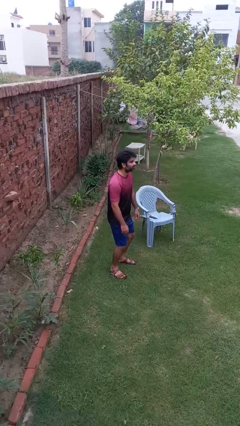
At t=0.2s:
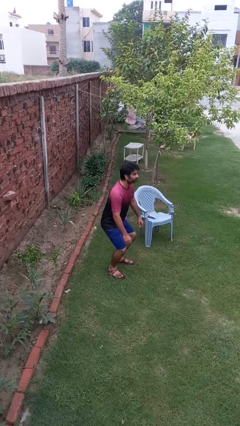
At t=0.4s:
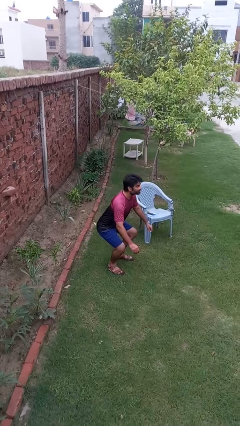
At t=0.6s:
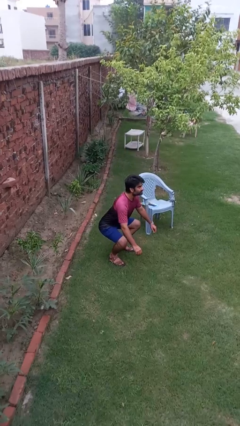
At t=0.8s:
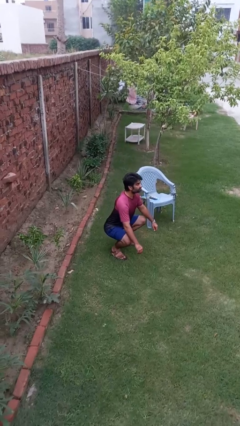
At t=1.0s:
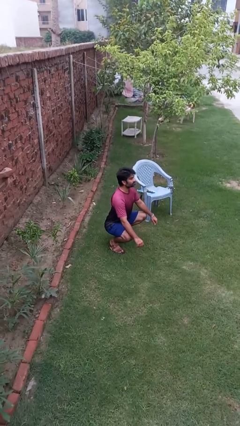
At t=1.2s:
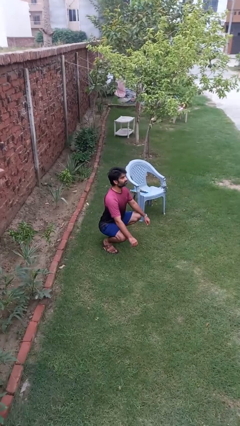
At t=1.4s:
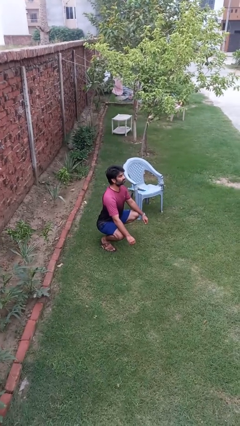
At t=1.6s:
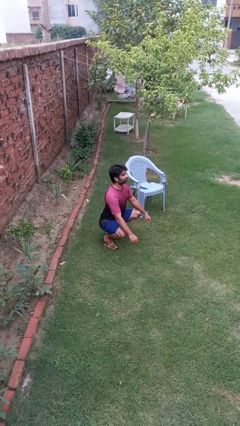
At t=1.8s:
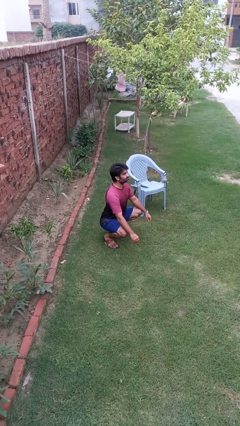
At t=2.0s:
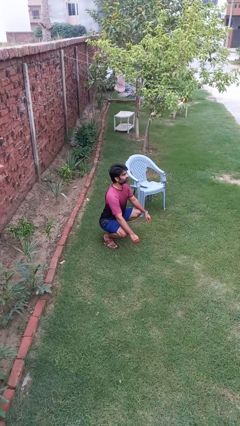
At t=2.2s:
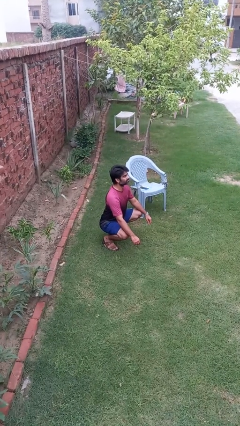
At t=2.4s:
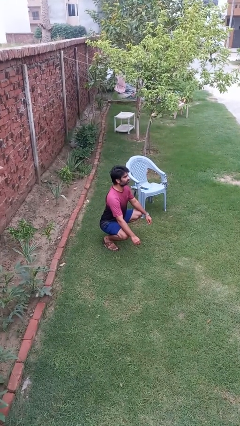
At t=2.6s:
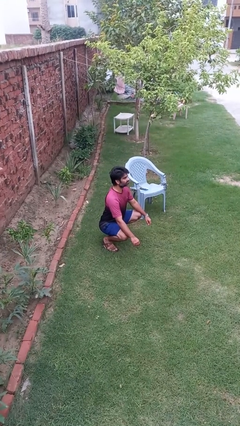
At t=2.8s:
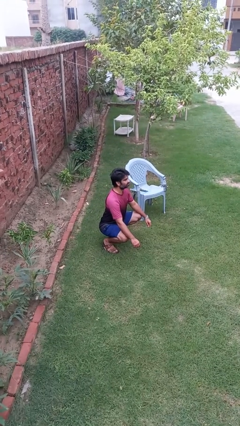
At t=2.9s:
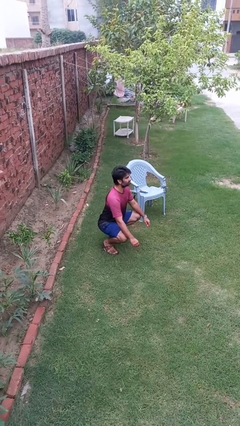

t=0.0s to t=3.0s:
person squats

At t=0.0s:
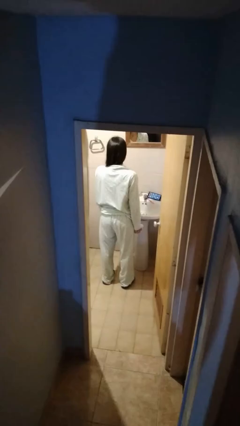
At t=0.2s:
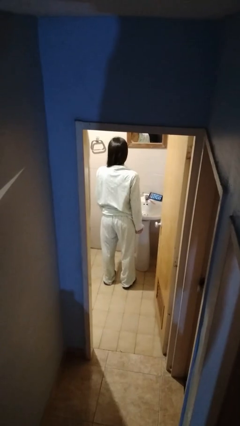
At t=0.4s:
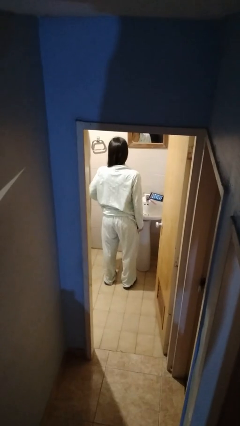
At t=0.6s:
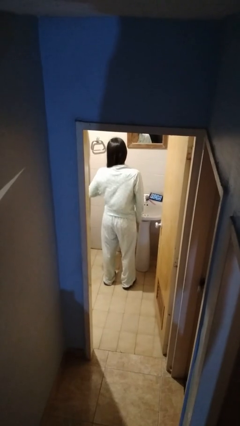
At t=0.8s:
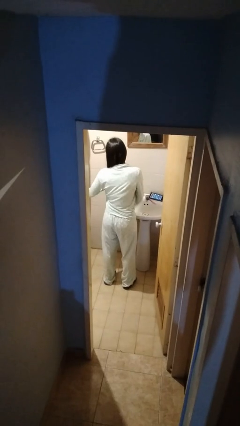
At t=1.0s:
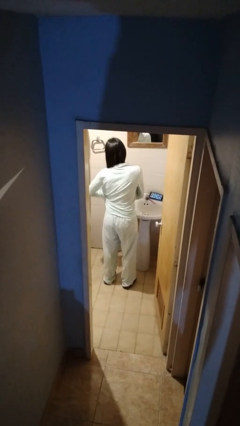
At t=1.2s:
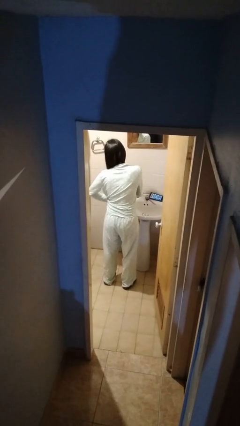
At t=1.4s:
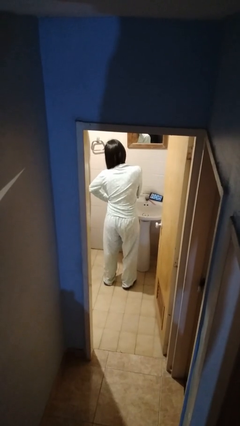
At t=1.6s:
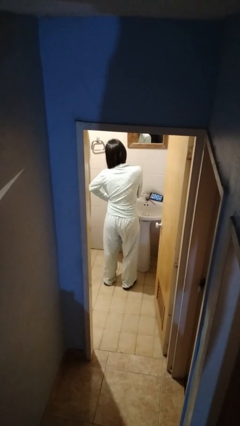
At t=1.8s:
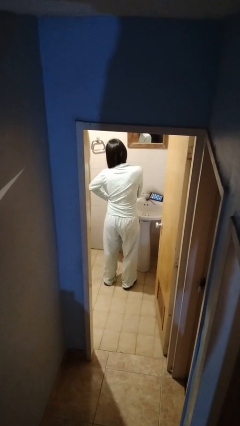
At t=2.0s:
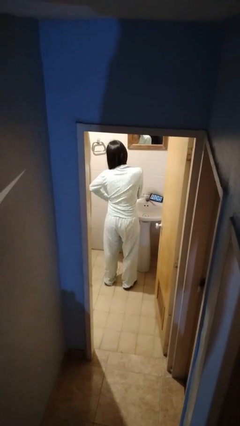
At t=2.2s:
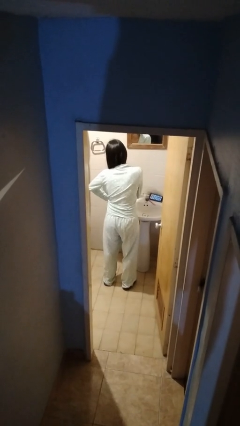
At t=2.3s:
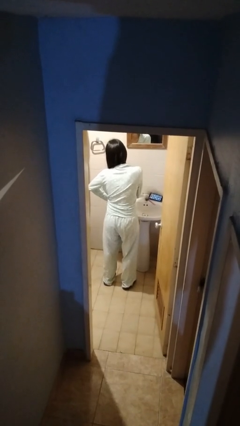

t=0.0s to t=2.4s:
person applies deodorant

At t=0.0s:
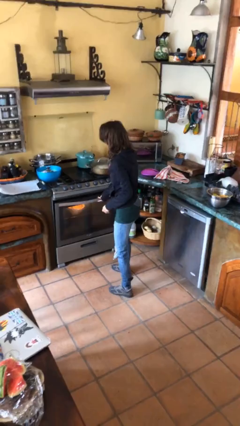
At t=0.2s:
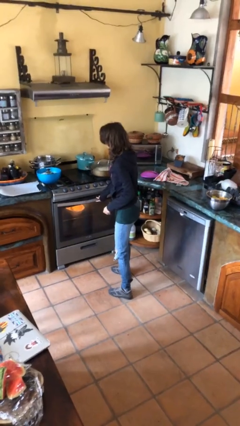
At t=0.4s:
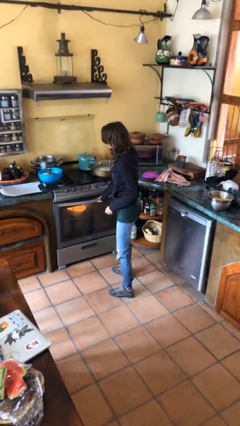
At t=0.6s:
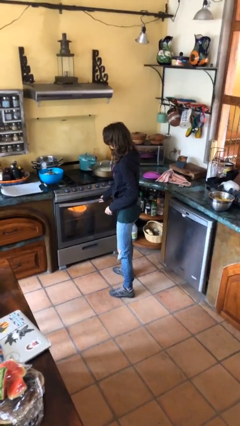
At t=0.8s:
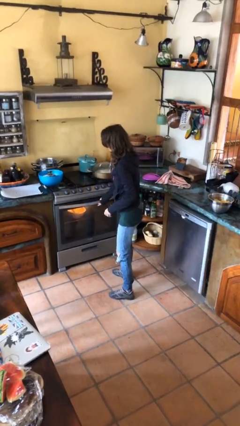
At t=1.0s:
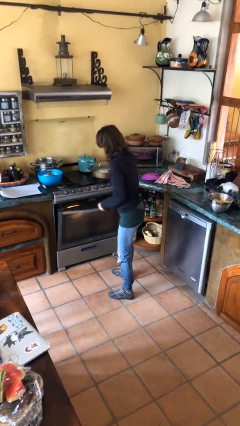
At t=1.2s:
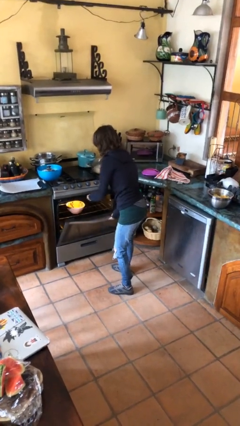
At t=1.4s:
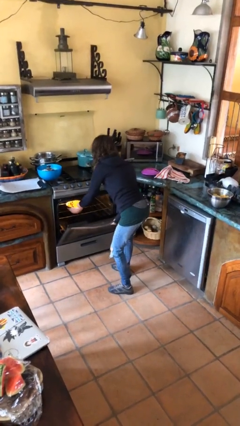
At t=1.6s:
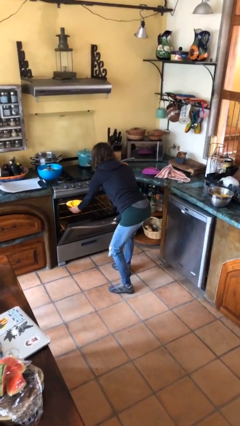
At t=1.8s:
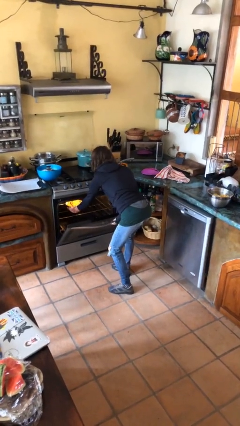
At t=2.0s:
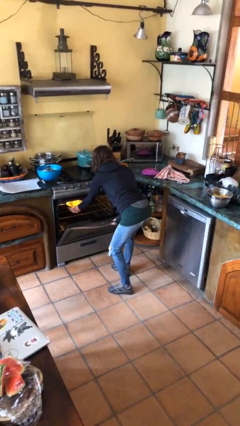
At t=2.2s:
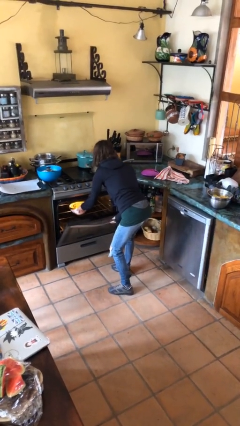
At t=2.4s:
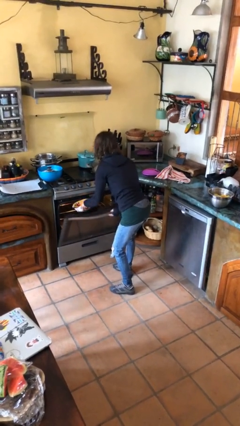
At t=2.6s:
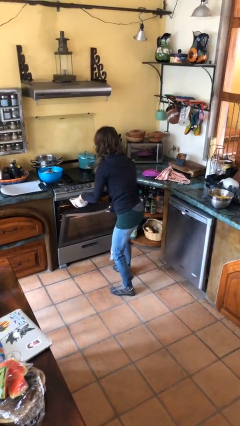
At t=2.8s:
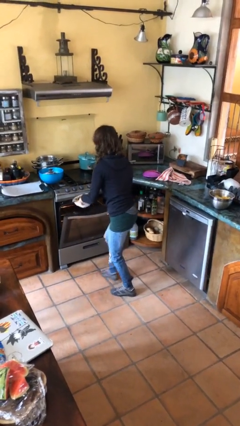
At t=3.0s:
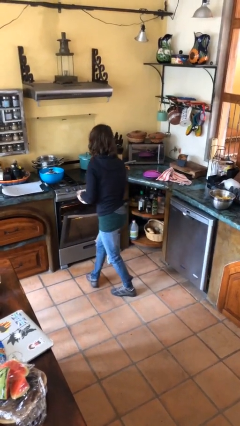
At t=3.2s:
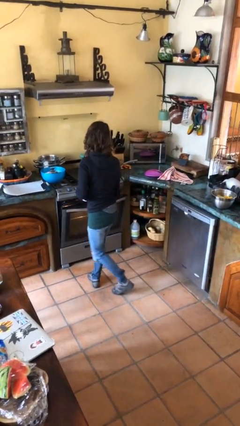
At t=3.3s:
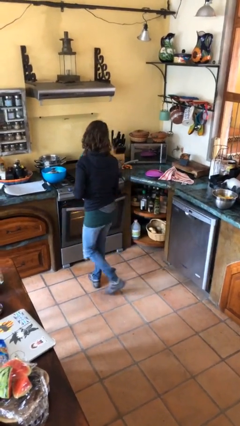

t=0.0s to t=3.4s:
person takes object from oven

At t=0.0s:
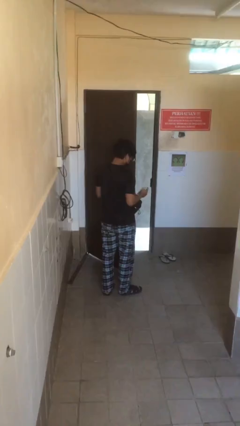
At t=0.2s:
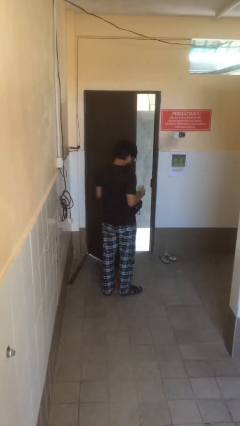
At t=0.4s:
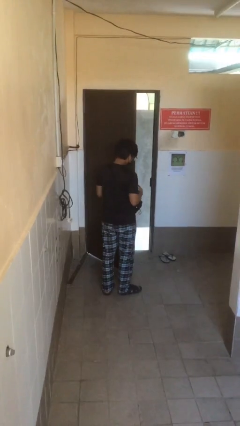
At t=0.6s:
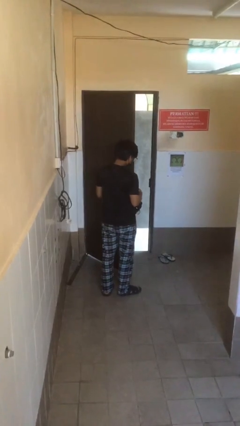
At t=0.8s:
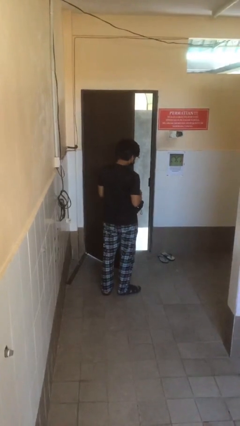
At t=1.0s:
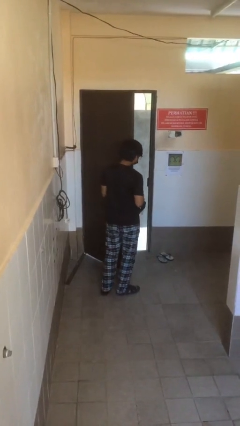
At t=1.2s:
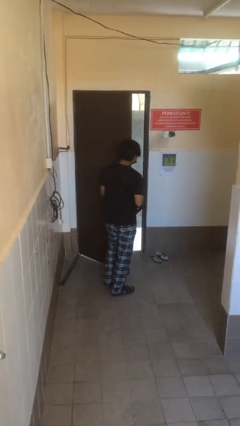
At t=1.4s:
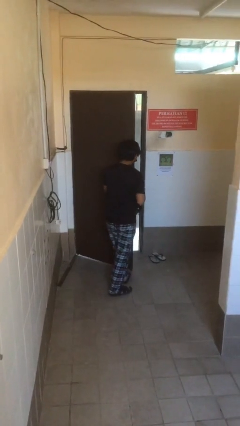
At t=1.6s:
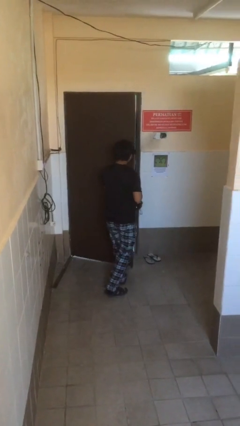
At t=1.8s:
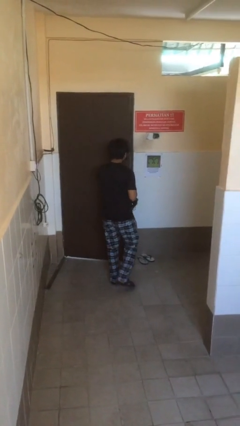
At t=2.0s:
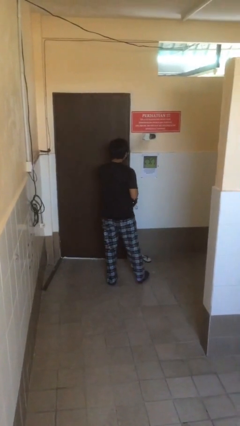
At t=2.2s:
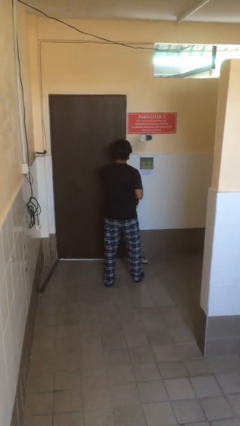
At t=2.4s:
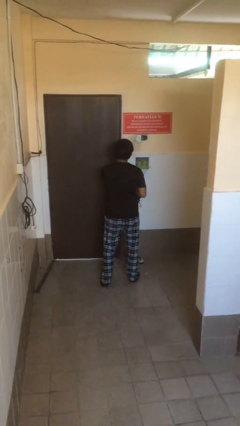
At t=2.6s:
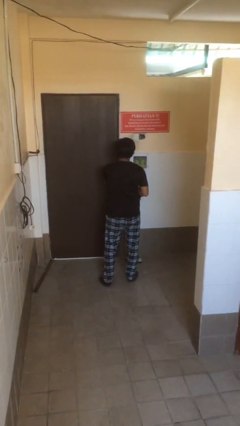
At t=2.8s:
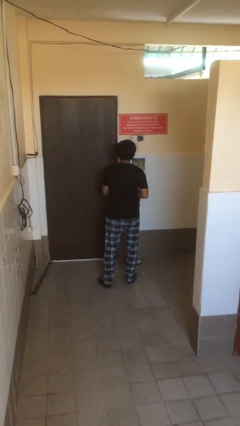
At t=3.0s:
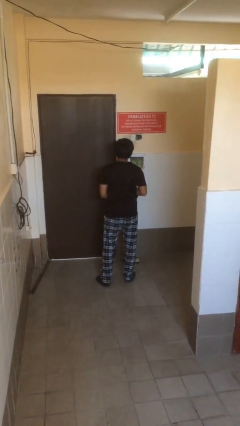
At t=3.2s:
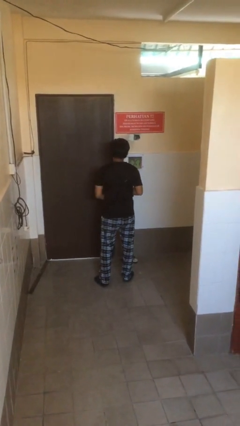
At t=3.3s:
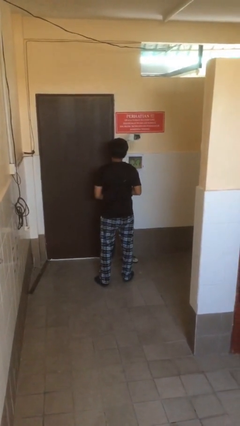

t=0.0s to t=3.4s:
person closes facility door

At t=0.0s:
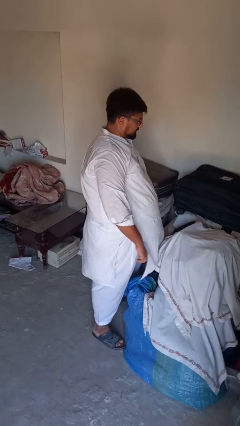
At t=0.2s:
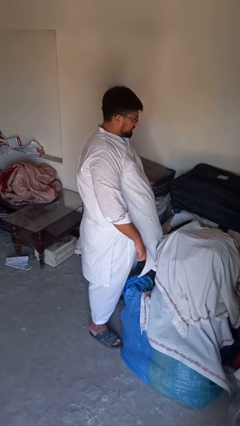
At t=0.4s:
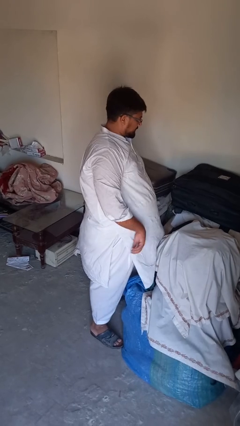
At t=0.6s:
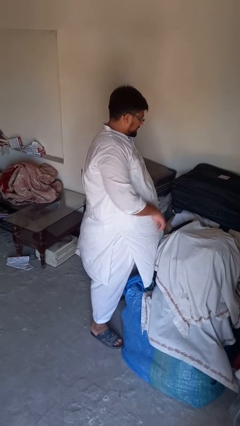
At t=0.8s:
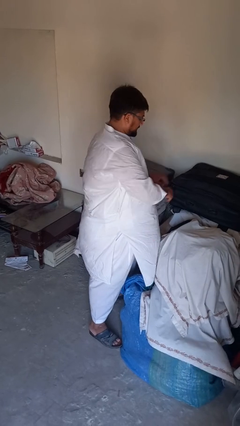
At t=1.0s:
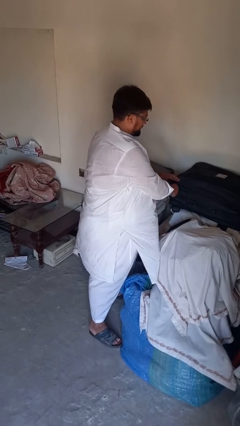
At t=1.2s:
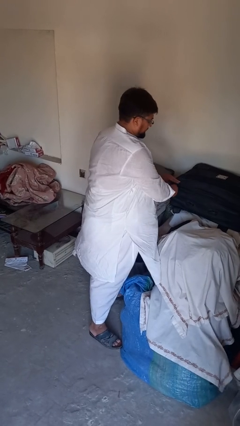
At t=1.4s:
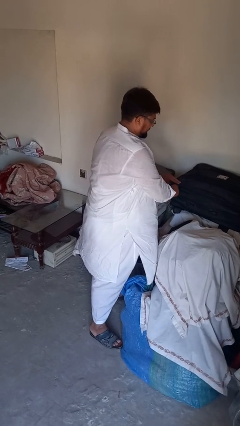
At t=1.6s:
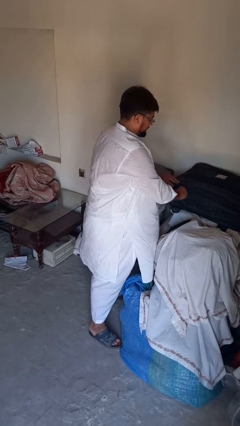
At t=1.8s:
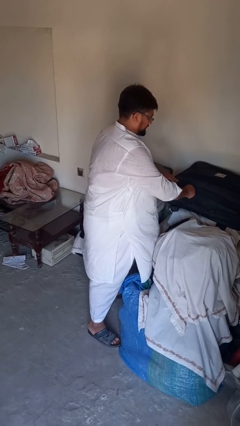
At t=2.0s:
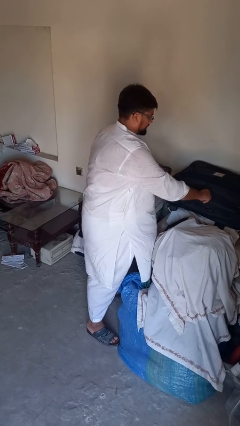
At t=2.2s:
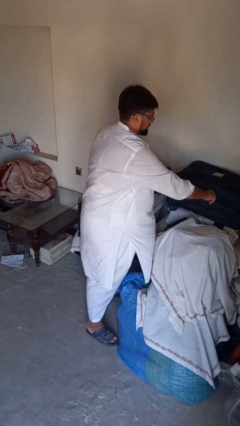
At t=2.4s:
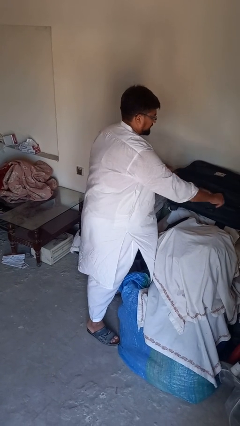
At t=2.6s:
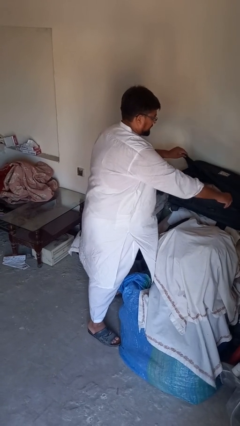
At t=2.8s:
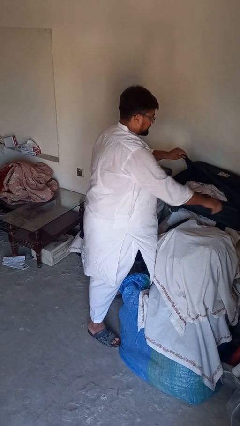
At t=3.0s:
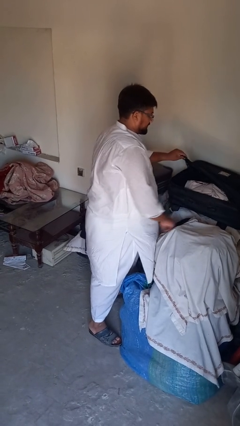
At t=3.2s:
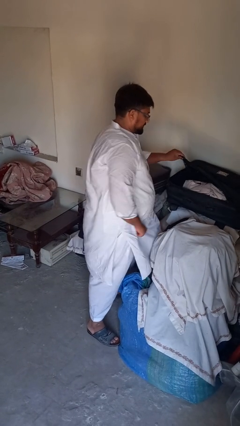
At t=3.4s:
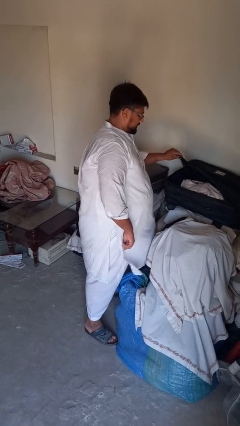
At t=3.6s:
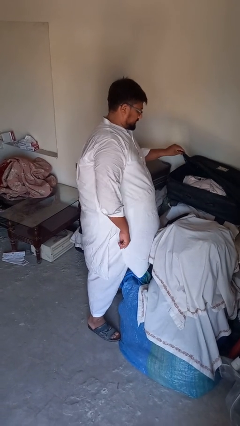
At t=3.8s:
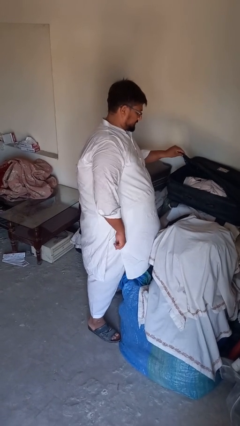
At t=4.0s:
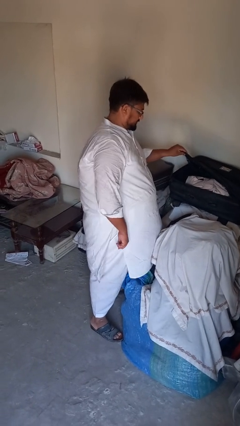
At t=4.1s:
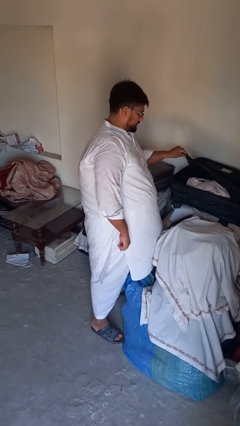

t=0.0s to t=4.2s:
person opens suitcase

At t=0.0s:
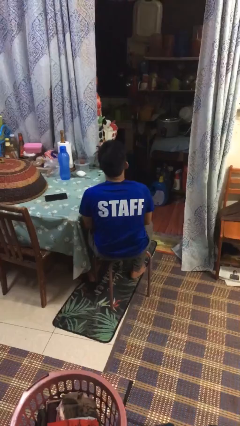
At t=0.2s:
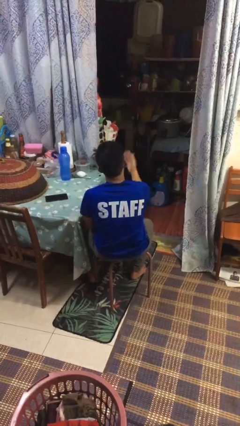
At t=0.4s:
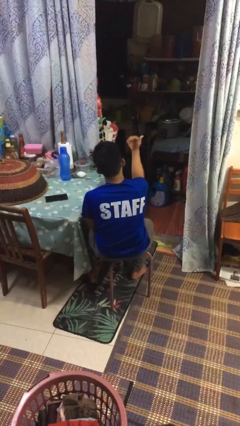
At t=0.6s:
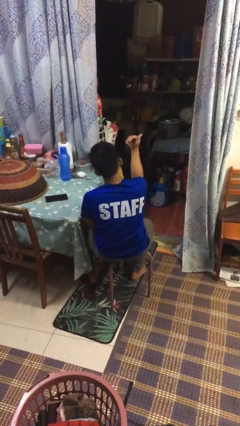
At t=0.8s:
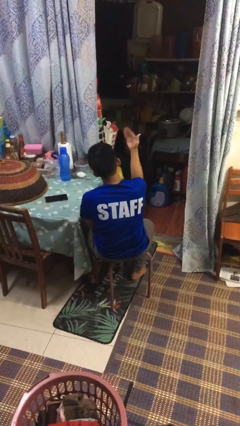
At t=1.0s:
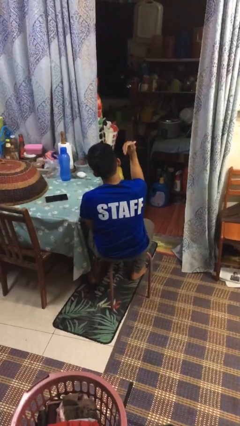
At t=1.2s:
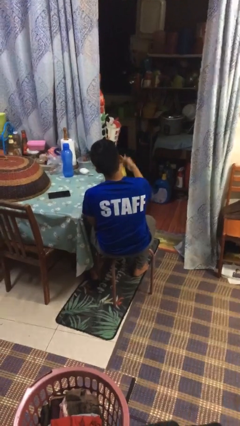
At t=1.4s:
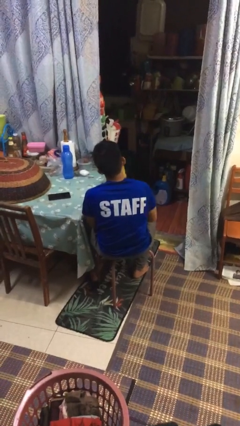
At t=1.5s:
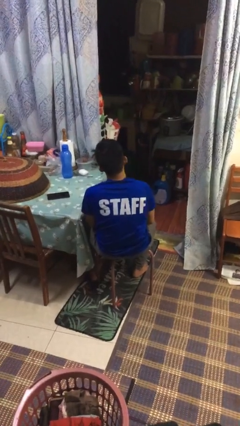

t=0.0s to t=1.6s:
person gestures come here
